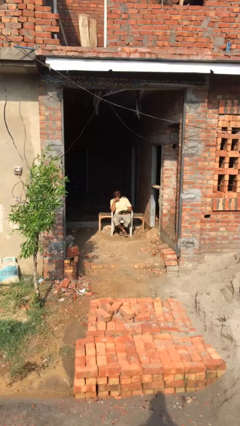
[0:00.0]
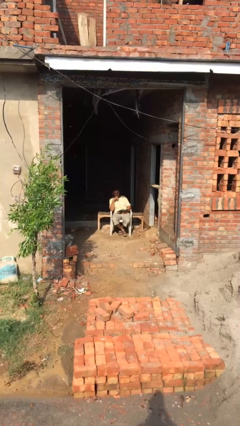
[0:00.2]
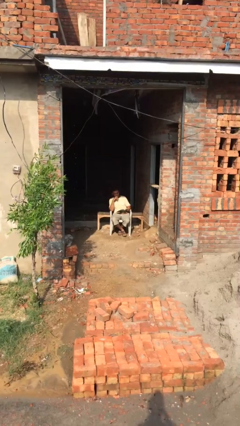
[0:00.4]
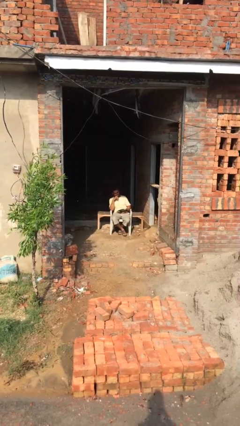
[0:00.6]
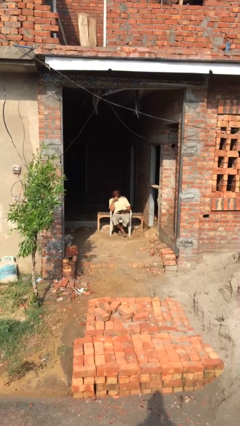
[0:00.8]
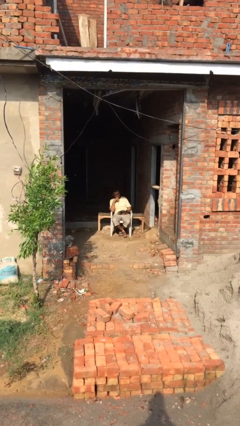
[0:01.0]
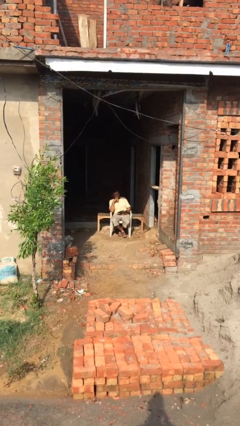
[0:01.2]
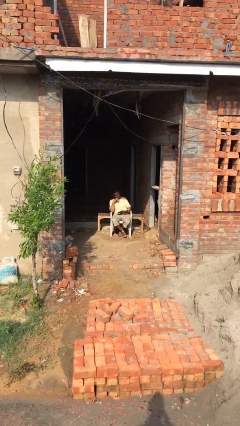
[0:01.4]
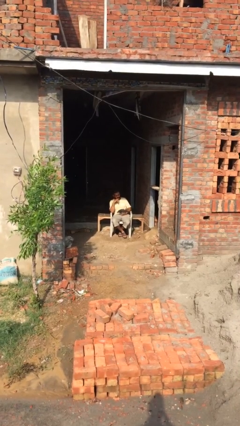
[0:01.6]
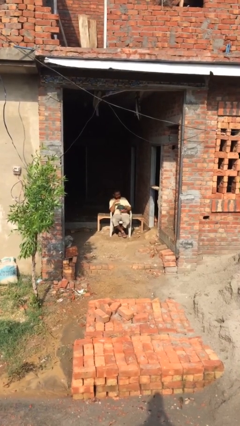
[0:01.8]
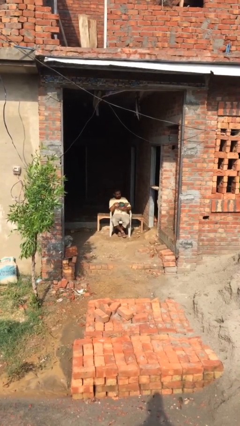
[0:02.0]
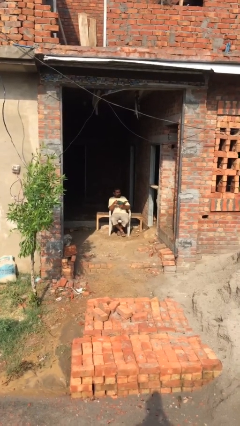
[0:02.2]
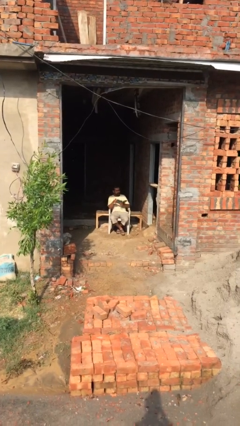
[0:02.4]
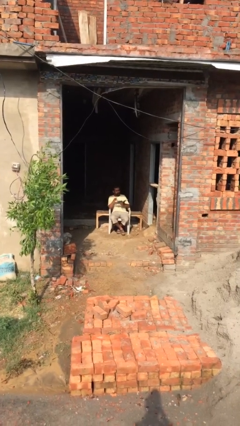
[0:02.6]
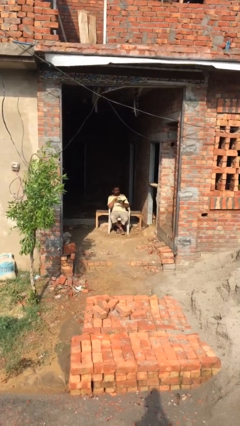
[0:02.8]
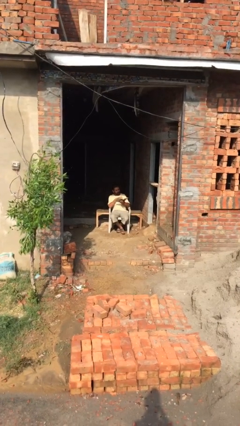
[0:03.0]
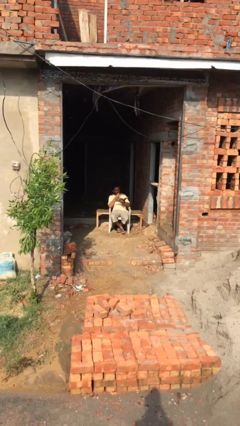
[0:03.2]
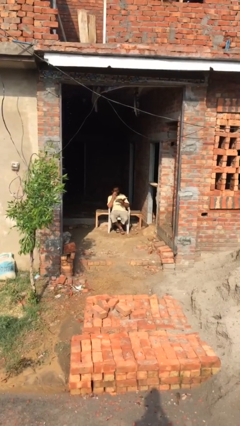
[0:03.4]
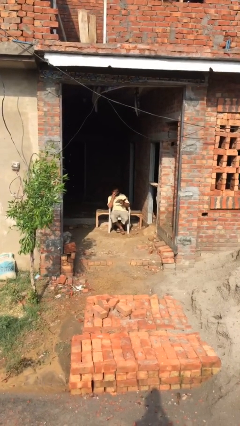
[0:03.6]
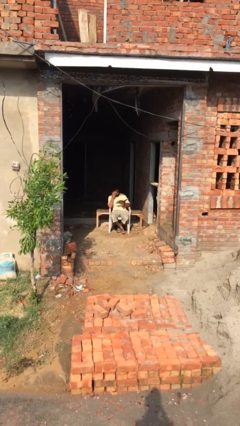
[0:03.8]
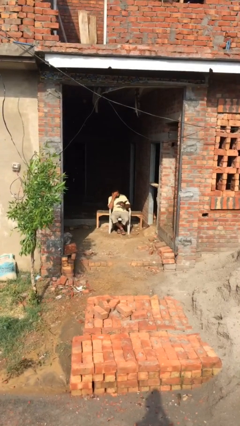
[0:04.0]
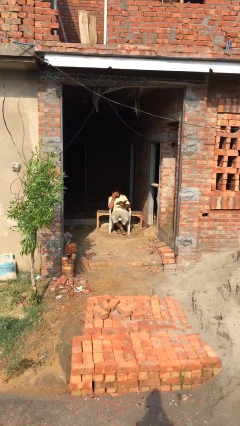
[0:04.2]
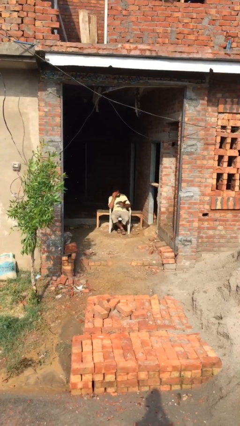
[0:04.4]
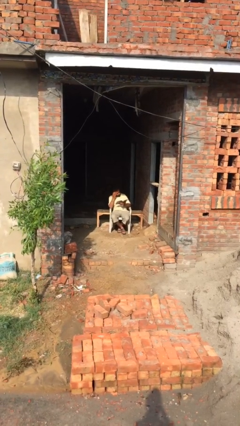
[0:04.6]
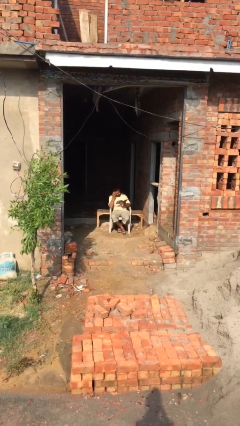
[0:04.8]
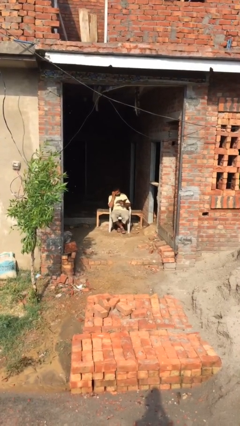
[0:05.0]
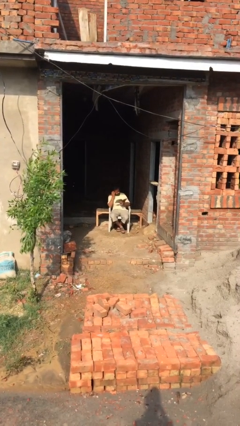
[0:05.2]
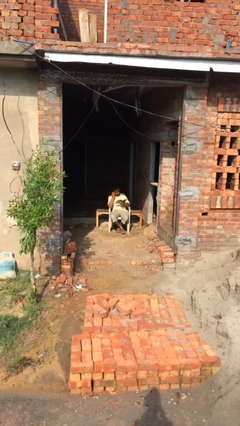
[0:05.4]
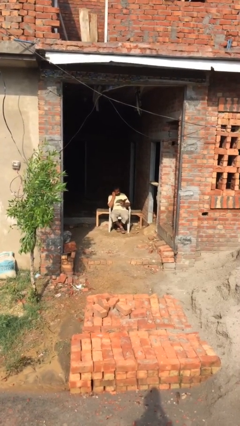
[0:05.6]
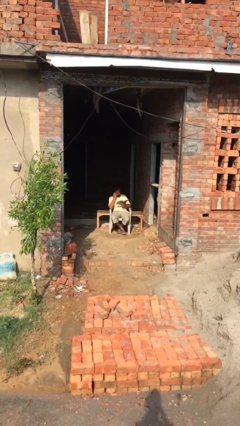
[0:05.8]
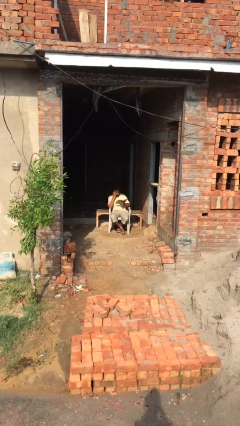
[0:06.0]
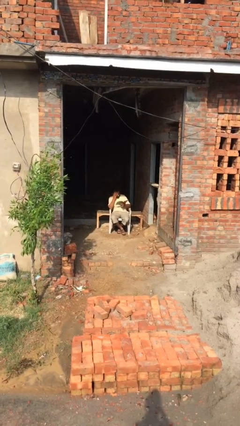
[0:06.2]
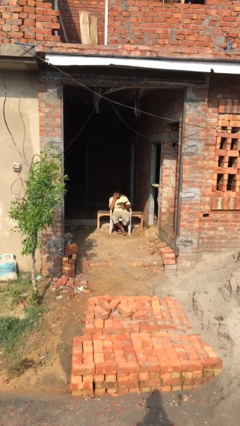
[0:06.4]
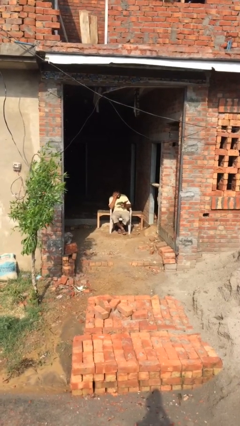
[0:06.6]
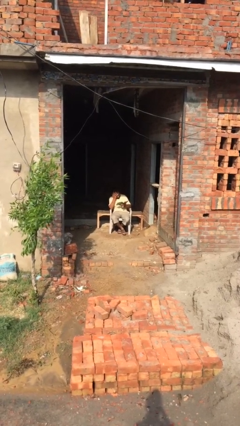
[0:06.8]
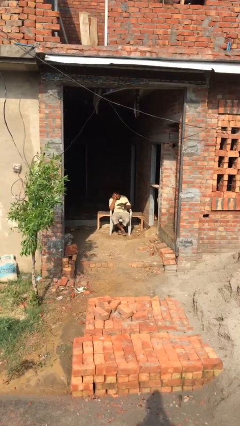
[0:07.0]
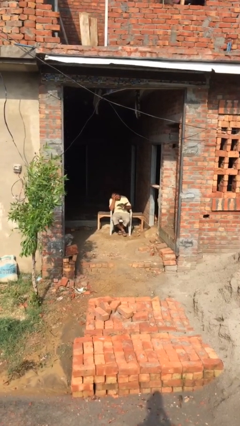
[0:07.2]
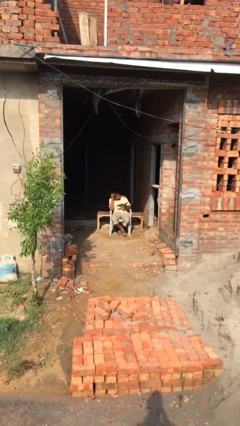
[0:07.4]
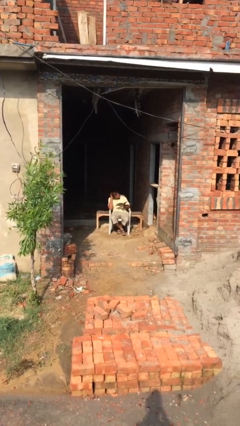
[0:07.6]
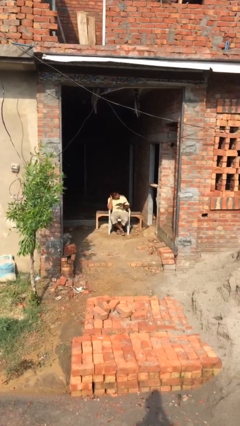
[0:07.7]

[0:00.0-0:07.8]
person reads document

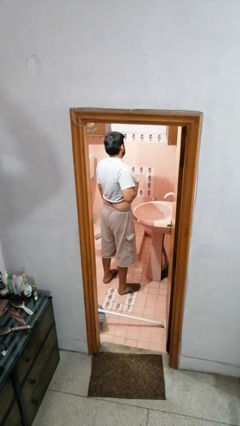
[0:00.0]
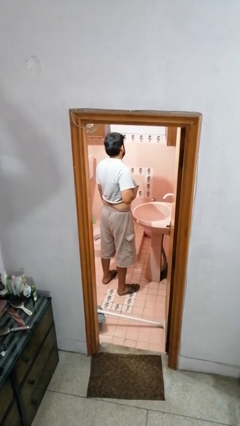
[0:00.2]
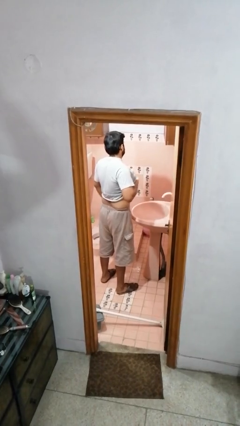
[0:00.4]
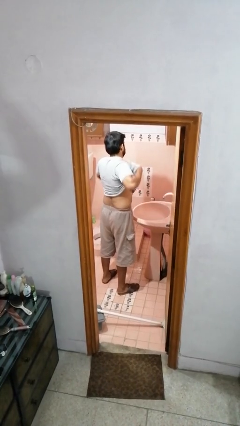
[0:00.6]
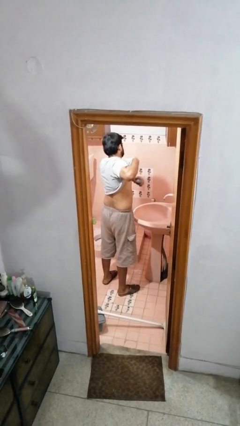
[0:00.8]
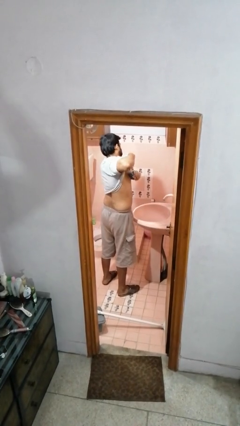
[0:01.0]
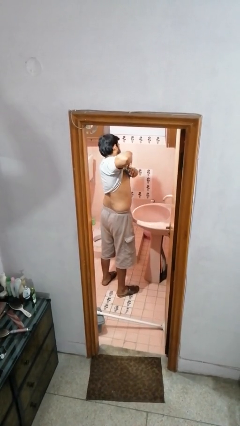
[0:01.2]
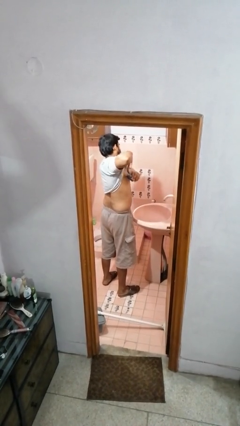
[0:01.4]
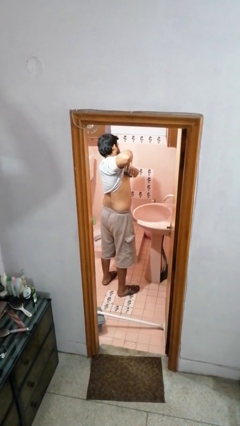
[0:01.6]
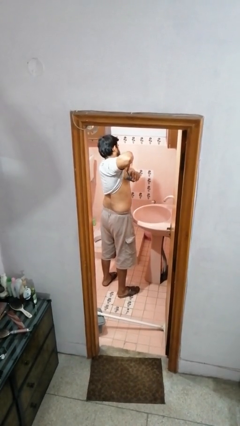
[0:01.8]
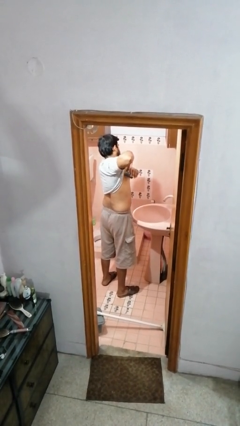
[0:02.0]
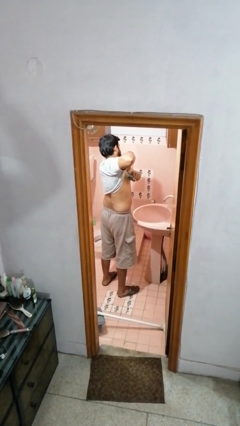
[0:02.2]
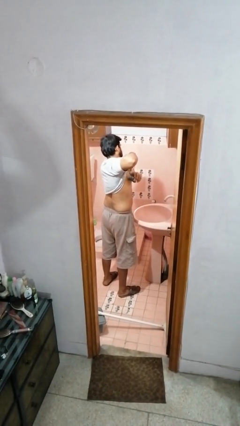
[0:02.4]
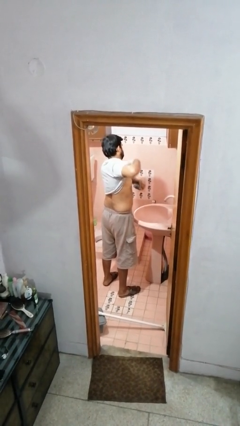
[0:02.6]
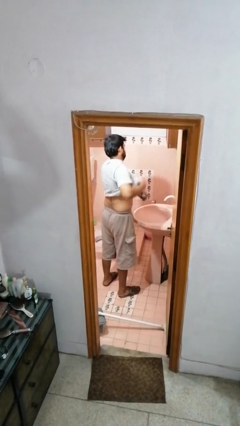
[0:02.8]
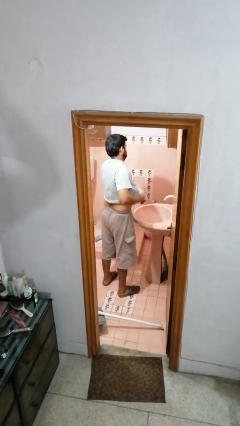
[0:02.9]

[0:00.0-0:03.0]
person applies deodorant

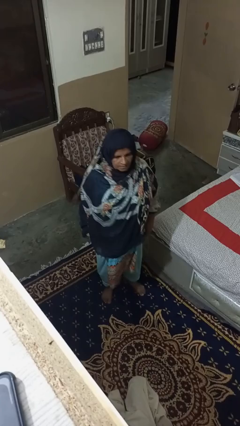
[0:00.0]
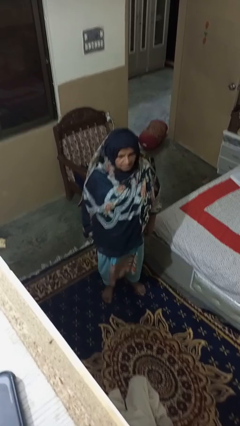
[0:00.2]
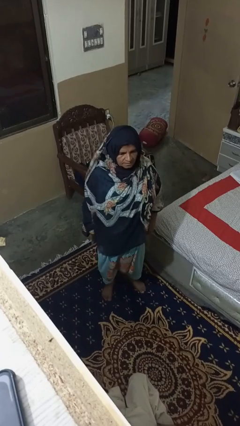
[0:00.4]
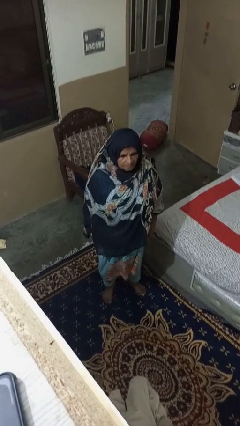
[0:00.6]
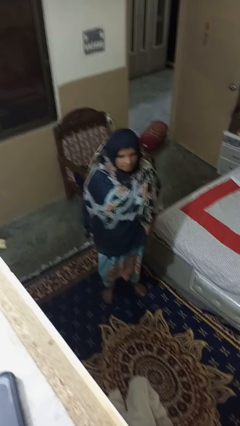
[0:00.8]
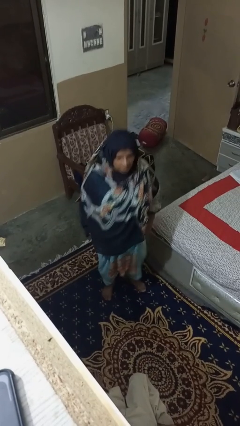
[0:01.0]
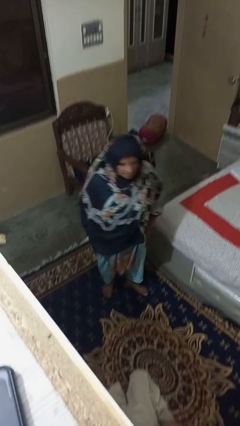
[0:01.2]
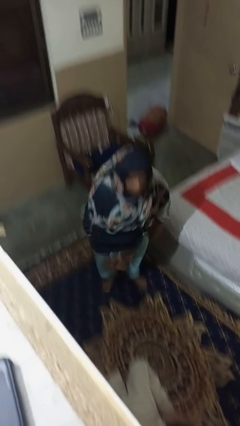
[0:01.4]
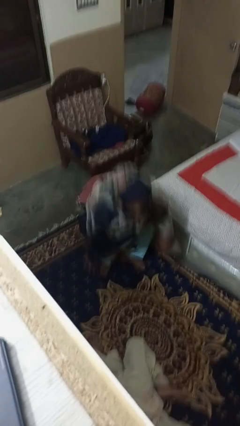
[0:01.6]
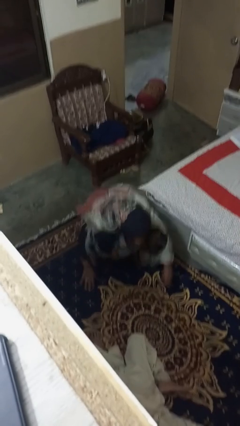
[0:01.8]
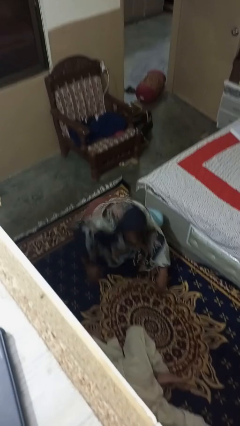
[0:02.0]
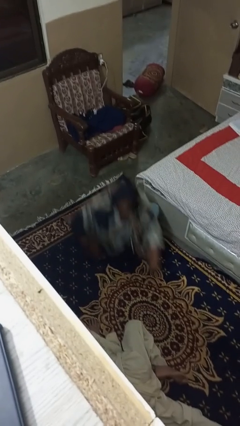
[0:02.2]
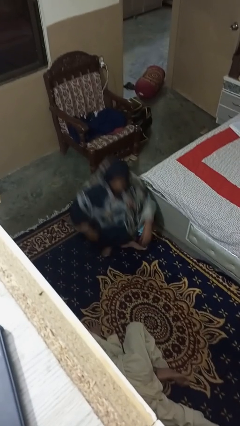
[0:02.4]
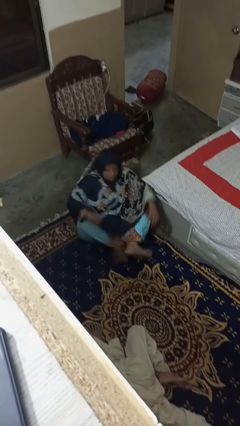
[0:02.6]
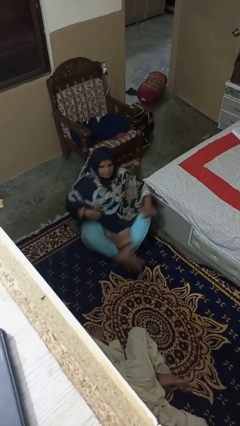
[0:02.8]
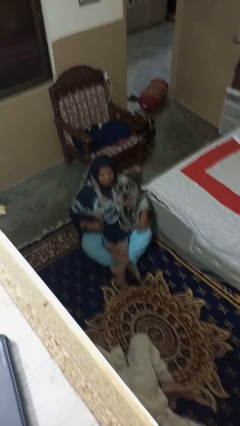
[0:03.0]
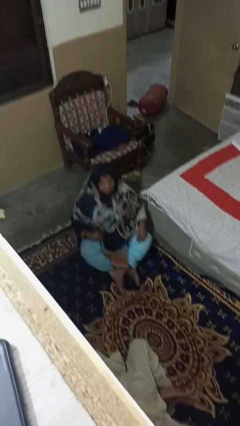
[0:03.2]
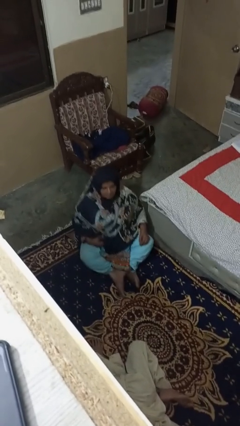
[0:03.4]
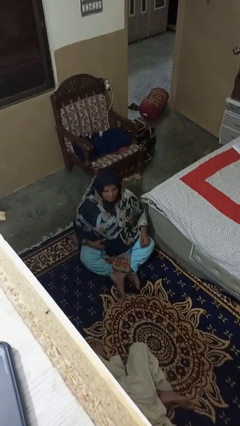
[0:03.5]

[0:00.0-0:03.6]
person sits crisscross

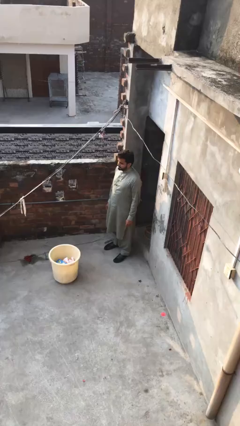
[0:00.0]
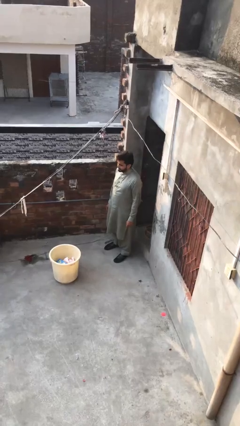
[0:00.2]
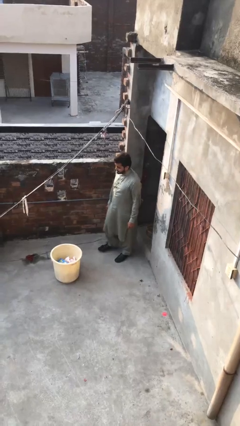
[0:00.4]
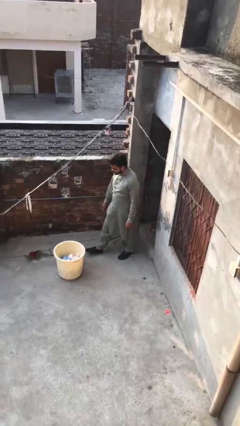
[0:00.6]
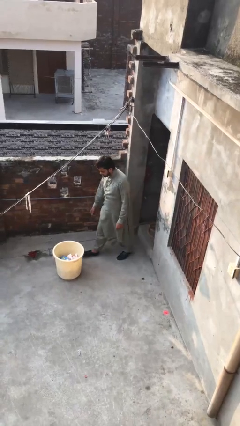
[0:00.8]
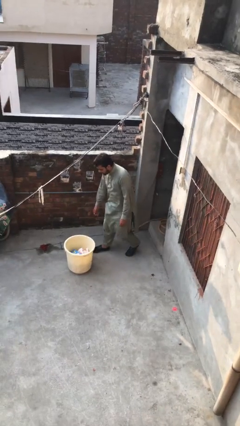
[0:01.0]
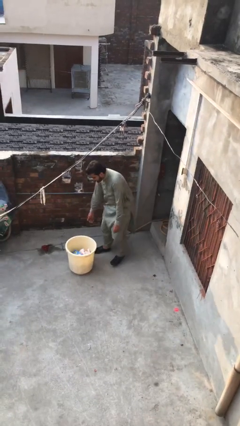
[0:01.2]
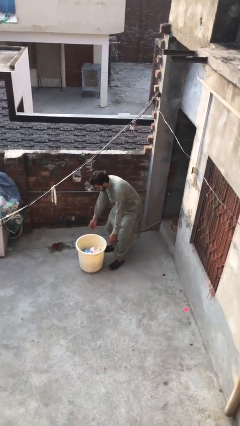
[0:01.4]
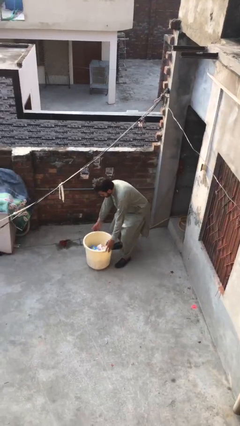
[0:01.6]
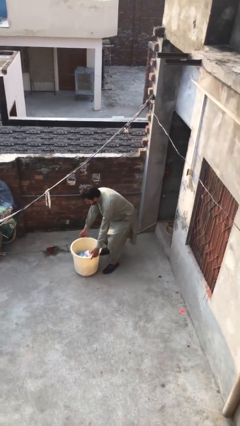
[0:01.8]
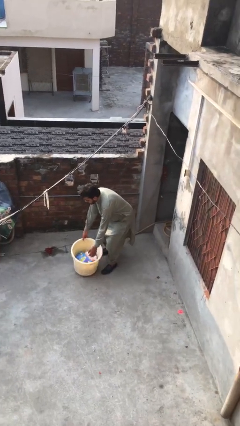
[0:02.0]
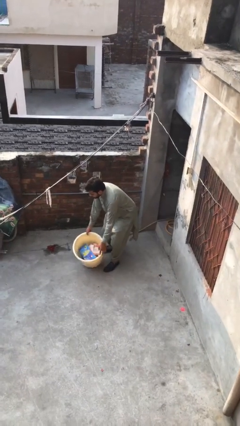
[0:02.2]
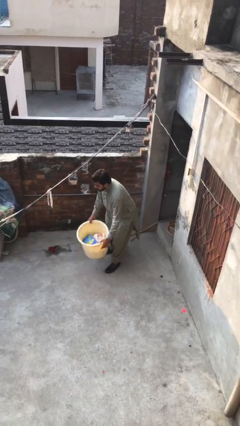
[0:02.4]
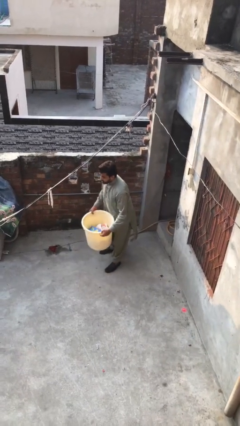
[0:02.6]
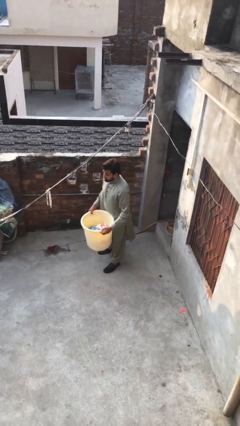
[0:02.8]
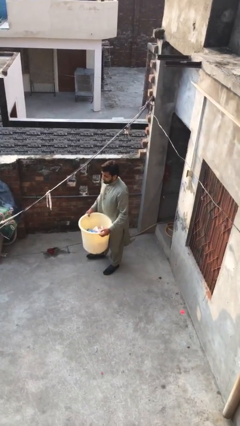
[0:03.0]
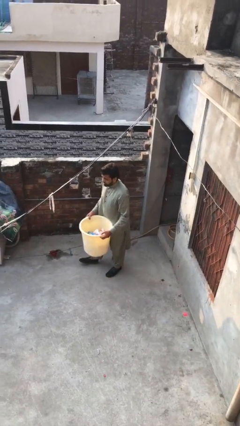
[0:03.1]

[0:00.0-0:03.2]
person picks up object from floor

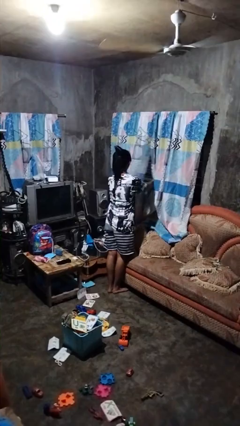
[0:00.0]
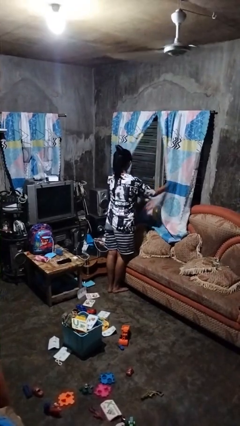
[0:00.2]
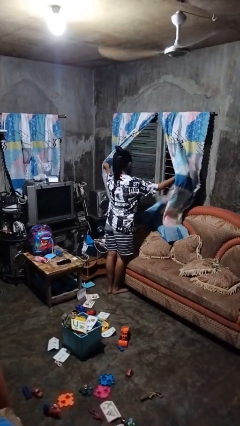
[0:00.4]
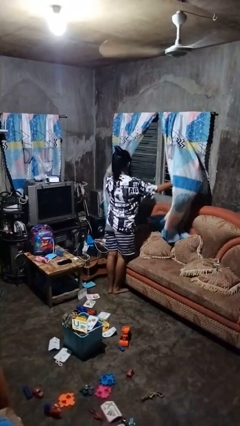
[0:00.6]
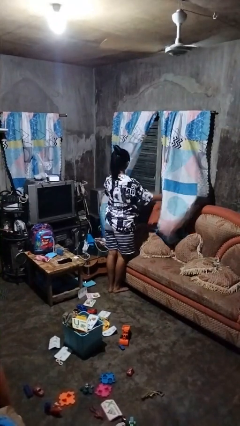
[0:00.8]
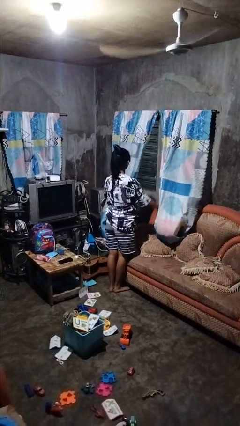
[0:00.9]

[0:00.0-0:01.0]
person opens curtains
